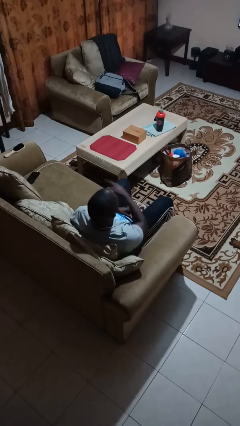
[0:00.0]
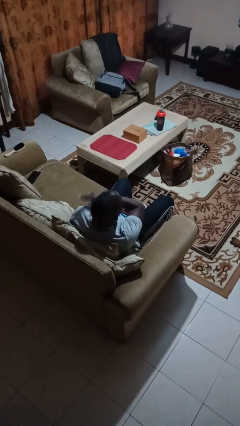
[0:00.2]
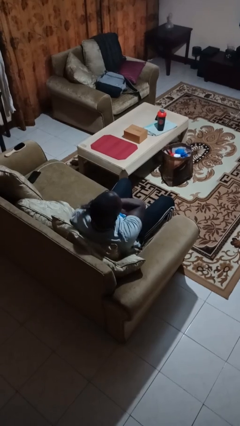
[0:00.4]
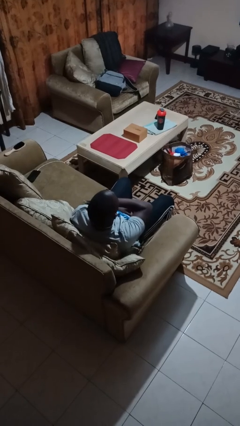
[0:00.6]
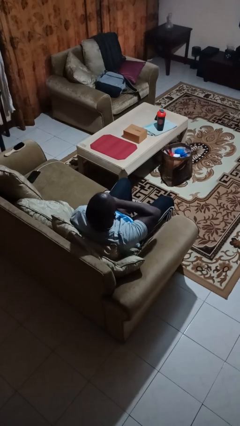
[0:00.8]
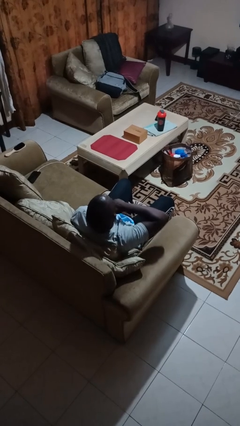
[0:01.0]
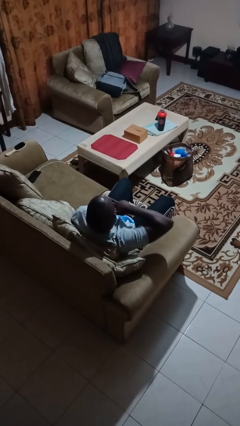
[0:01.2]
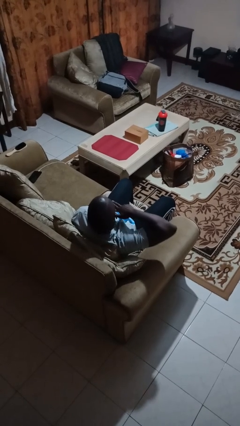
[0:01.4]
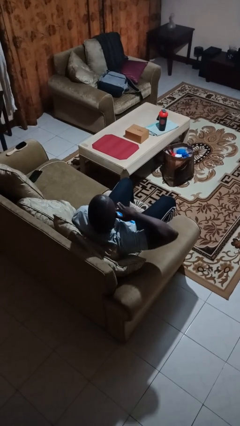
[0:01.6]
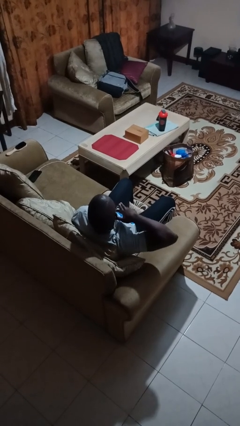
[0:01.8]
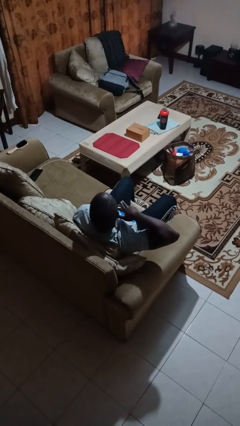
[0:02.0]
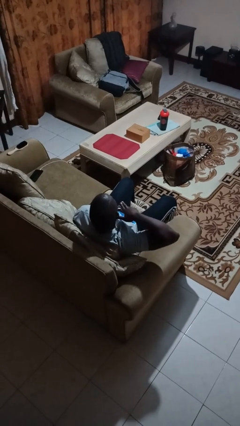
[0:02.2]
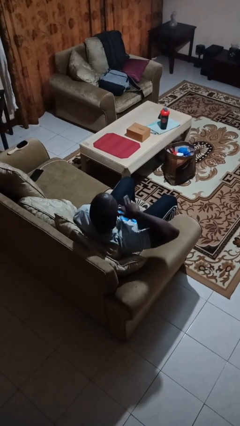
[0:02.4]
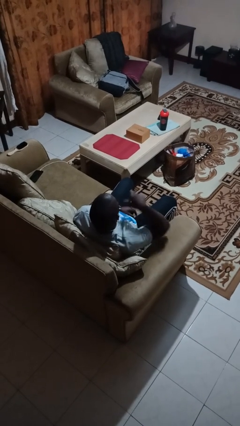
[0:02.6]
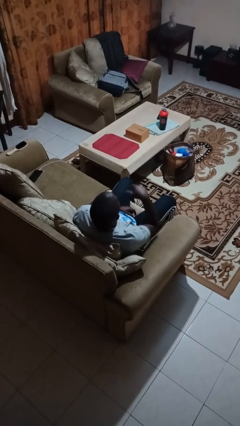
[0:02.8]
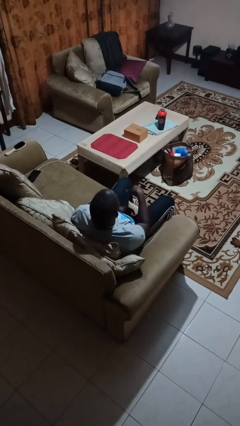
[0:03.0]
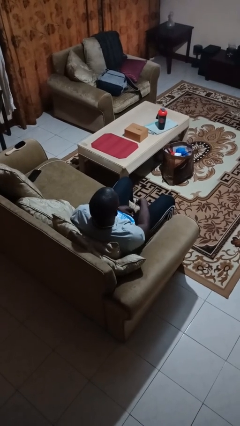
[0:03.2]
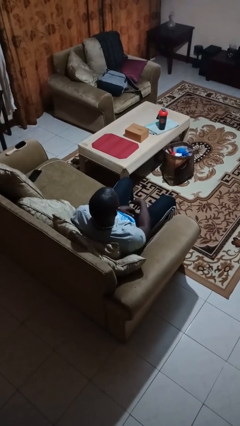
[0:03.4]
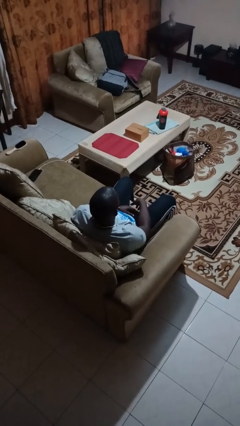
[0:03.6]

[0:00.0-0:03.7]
person gestures cut

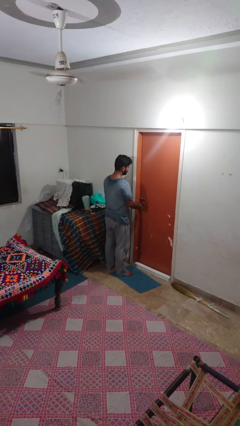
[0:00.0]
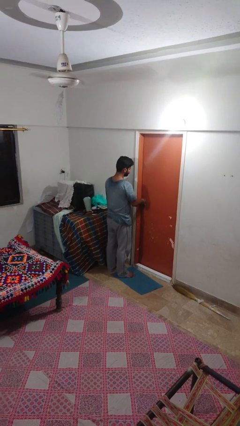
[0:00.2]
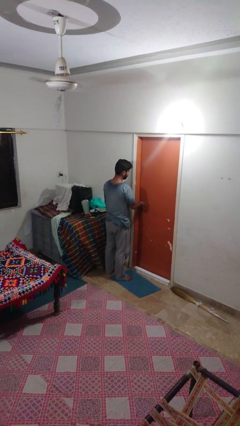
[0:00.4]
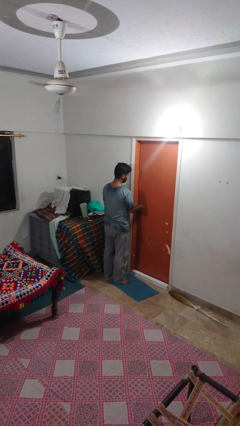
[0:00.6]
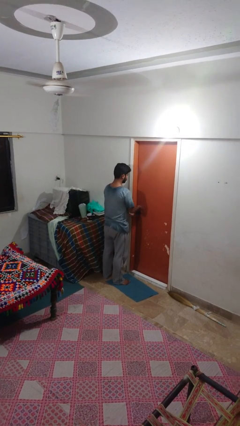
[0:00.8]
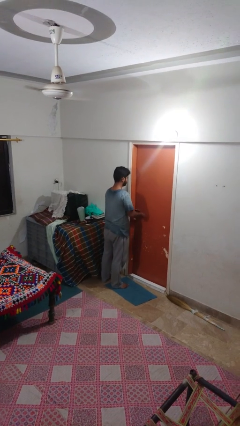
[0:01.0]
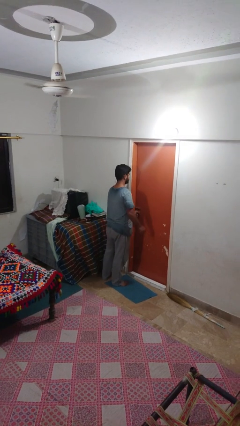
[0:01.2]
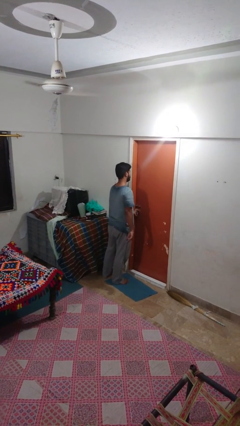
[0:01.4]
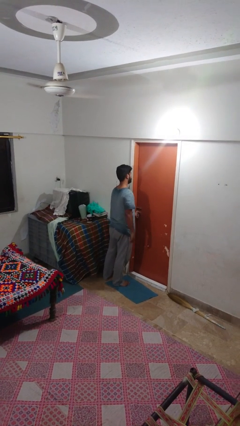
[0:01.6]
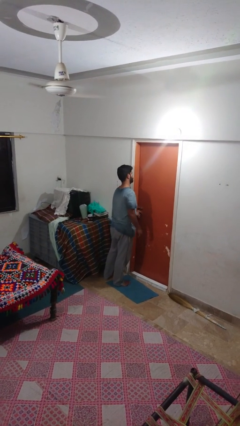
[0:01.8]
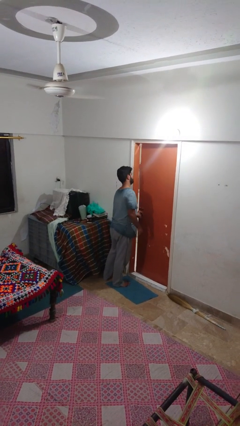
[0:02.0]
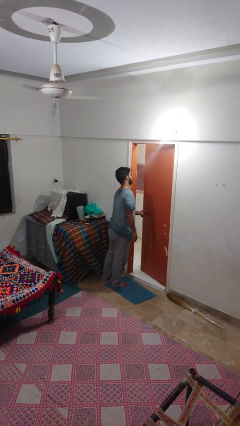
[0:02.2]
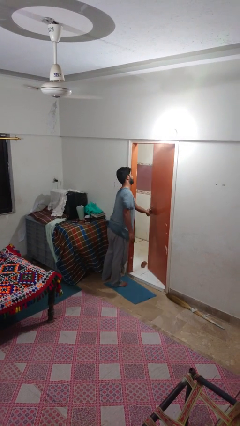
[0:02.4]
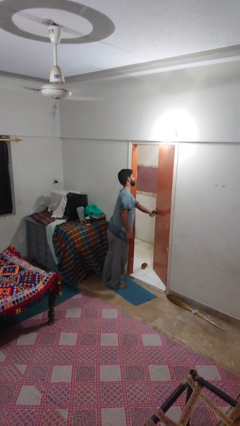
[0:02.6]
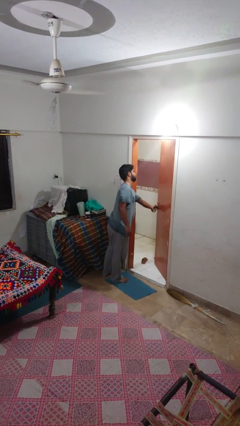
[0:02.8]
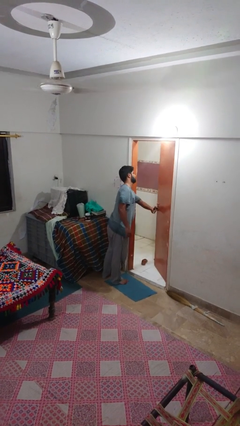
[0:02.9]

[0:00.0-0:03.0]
person unlocks door with keys

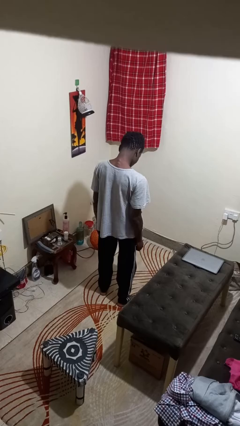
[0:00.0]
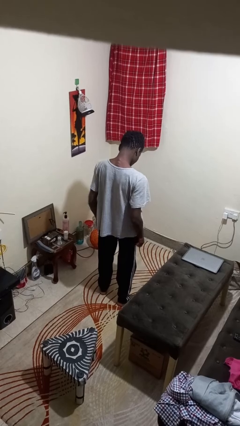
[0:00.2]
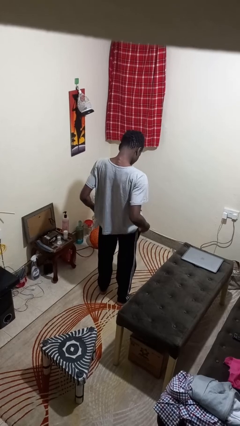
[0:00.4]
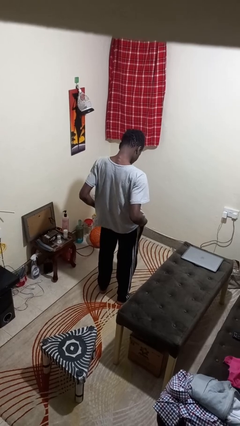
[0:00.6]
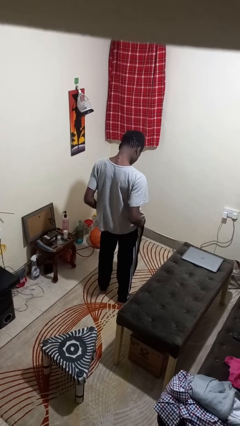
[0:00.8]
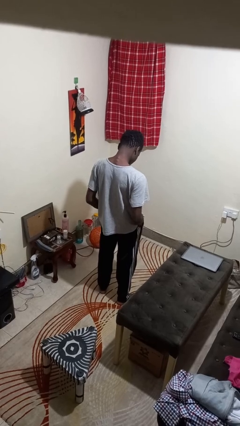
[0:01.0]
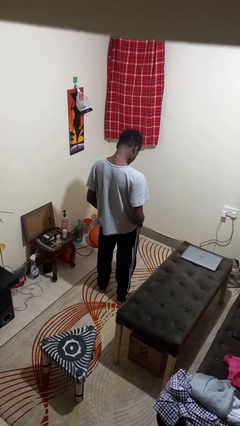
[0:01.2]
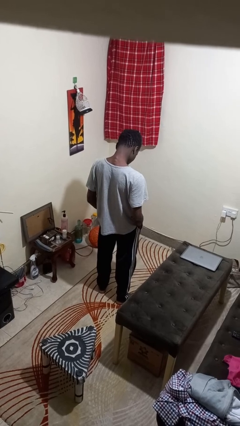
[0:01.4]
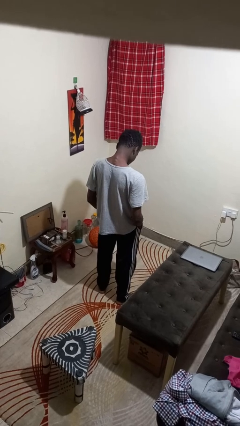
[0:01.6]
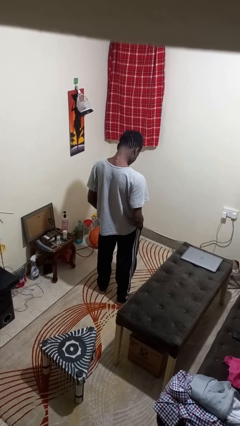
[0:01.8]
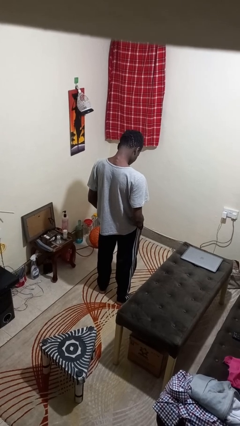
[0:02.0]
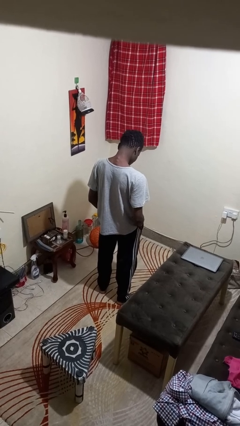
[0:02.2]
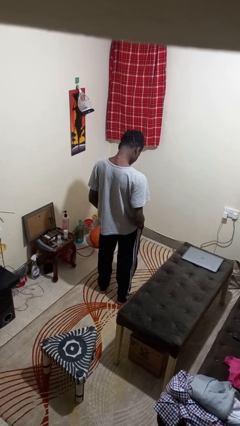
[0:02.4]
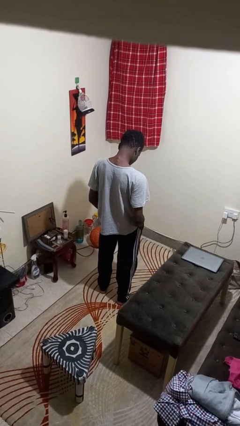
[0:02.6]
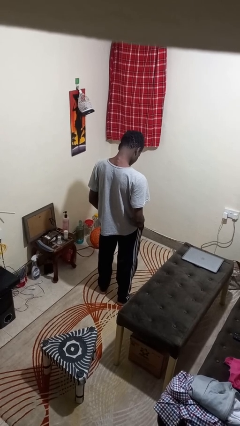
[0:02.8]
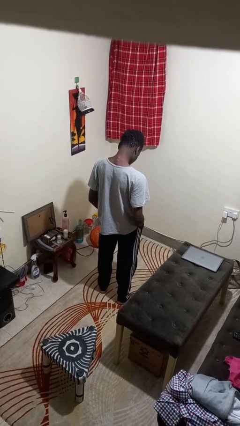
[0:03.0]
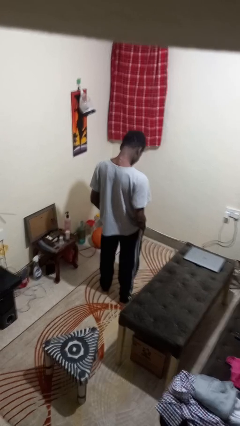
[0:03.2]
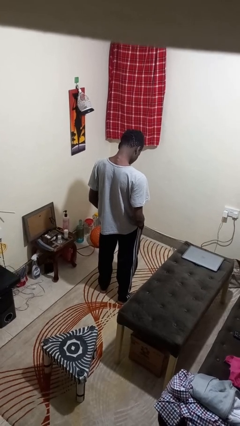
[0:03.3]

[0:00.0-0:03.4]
person puts hands in back pockets

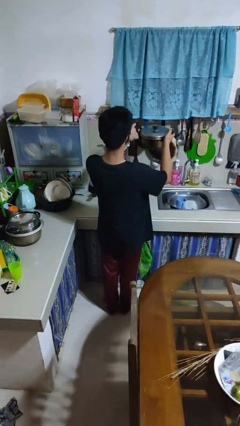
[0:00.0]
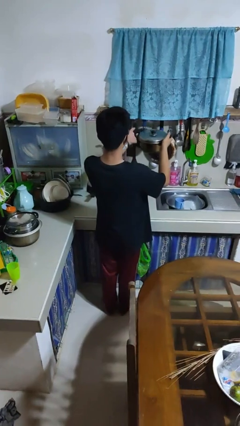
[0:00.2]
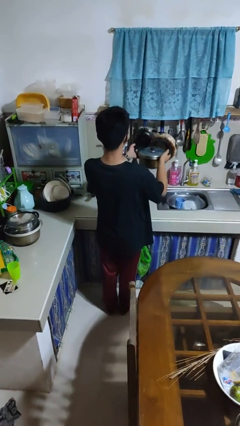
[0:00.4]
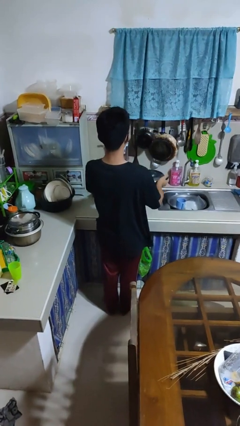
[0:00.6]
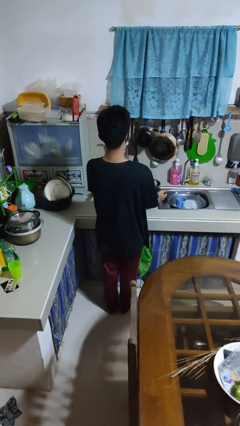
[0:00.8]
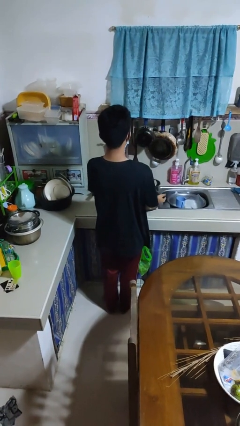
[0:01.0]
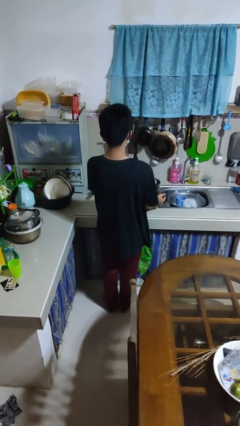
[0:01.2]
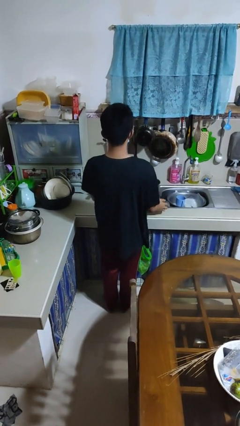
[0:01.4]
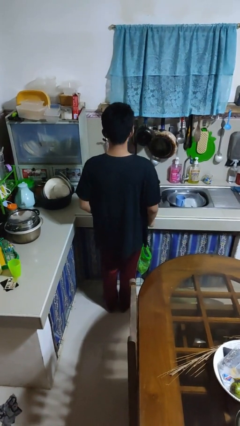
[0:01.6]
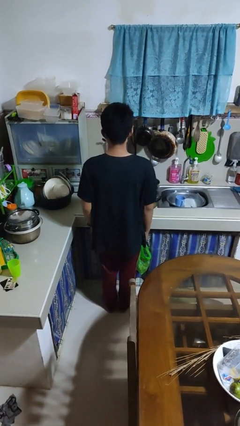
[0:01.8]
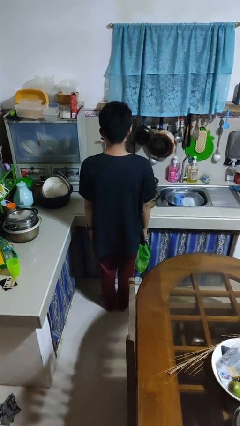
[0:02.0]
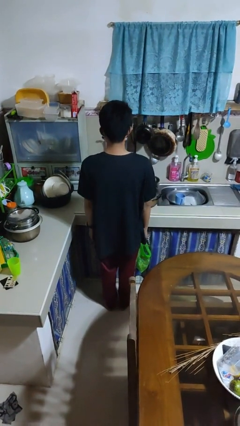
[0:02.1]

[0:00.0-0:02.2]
person puts down object on countertop

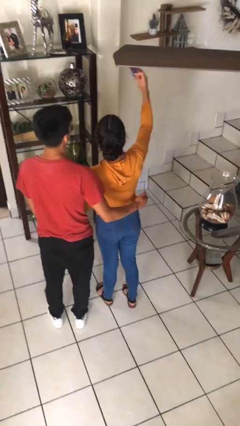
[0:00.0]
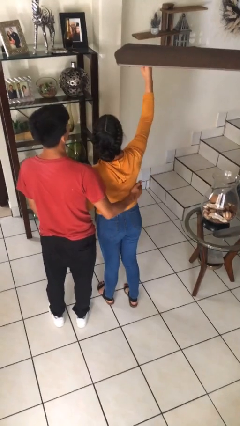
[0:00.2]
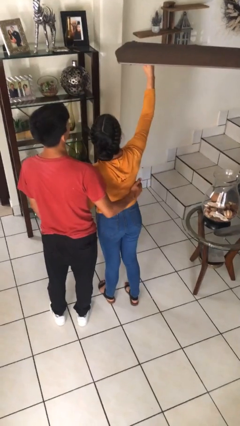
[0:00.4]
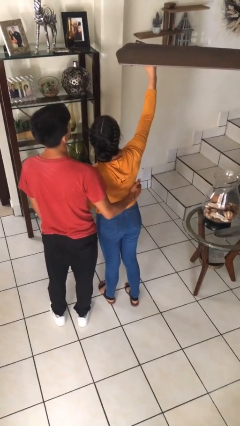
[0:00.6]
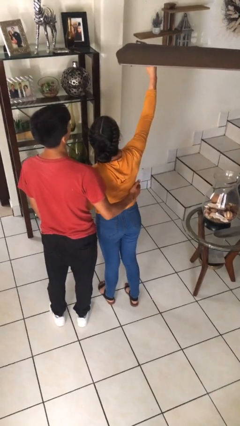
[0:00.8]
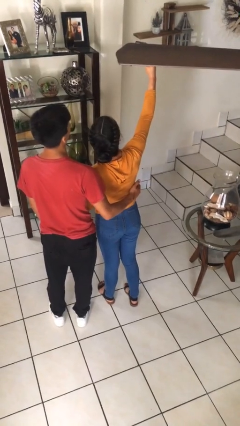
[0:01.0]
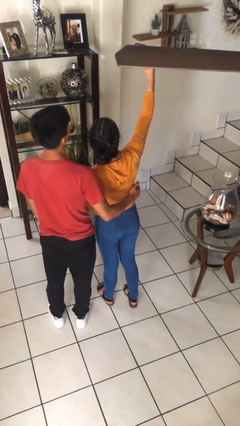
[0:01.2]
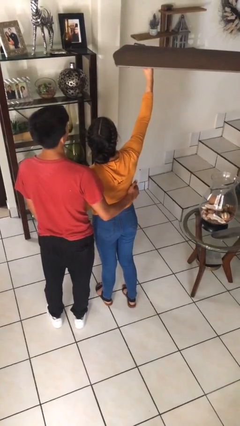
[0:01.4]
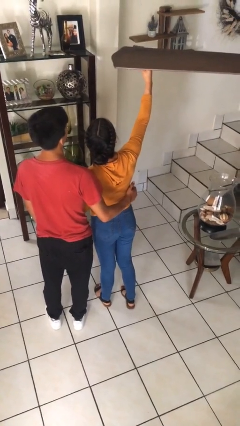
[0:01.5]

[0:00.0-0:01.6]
person takes selfie with person

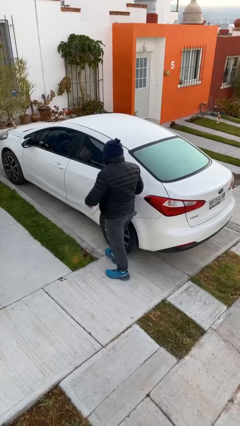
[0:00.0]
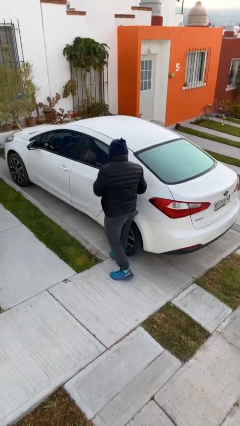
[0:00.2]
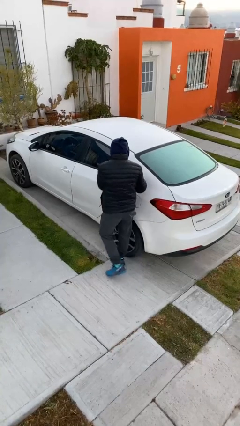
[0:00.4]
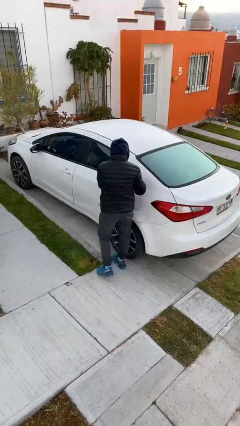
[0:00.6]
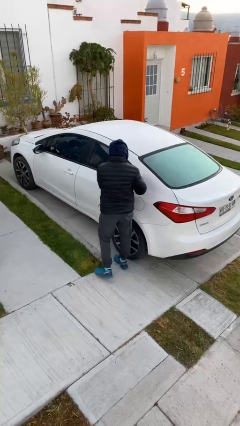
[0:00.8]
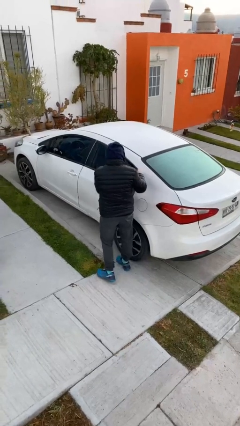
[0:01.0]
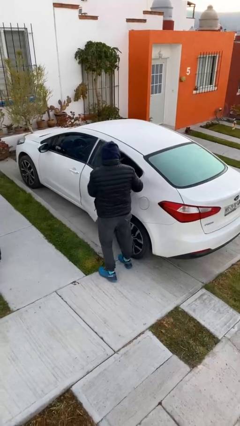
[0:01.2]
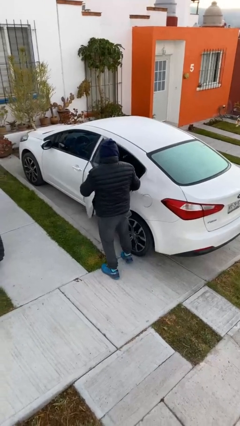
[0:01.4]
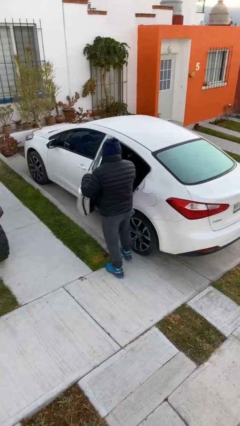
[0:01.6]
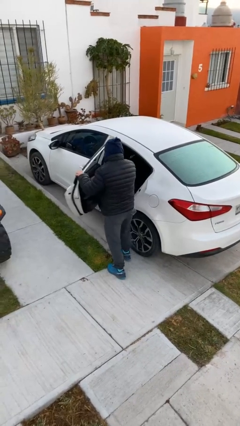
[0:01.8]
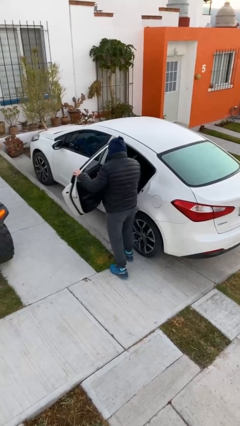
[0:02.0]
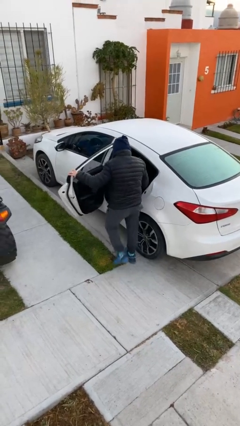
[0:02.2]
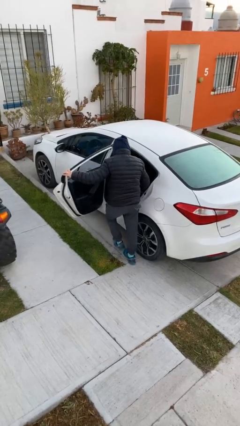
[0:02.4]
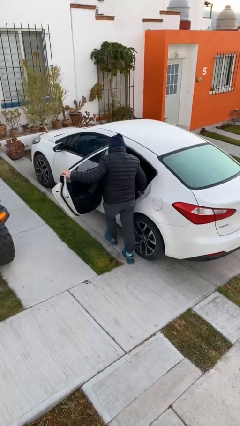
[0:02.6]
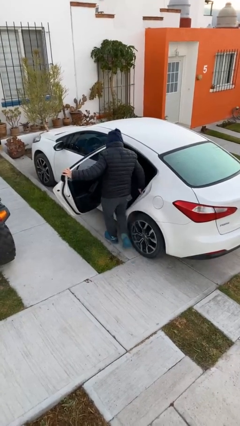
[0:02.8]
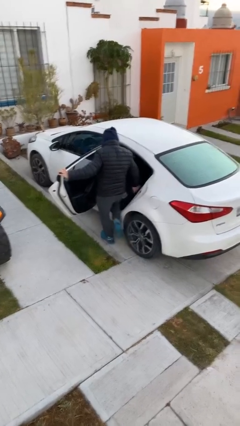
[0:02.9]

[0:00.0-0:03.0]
person opens car door

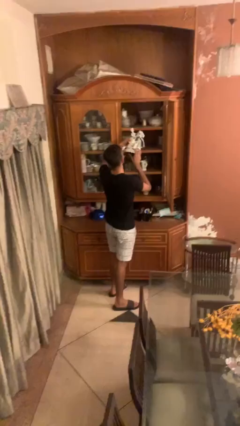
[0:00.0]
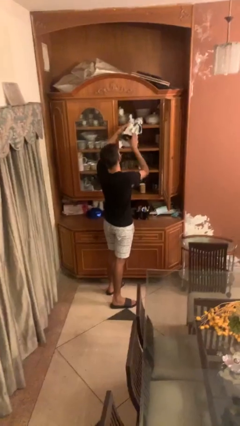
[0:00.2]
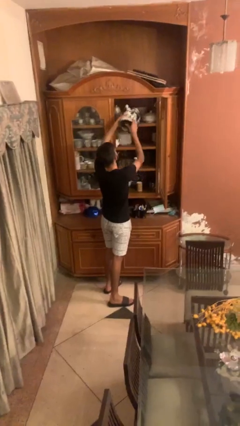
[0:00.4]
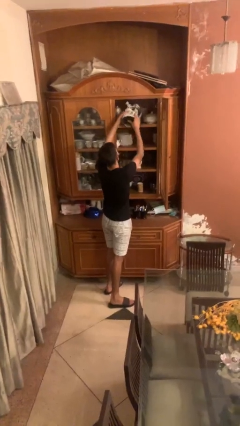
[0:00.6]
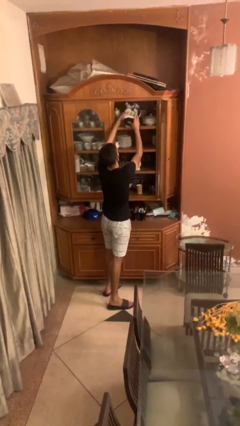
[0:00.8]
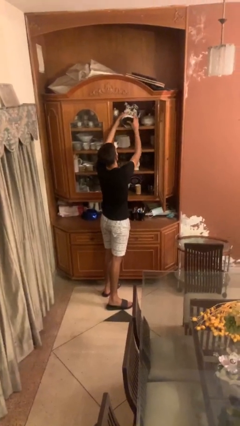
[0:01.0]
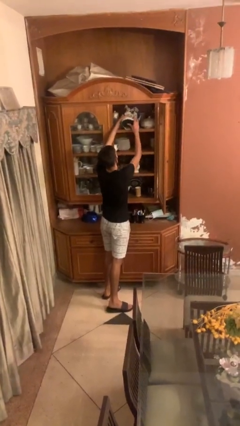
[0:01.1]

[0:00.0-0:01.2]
person puts down object on shelf
